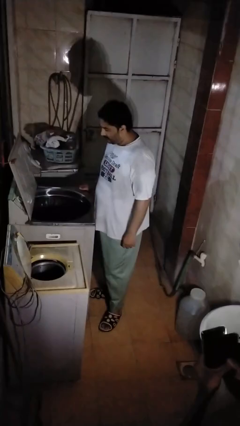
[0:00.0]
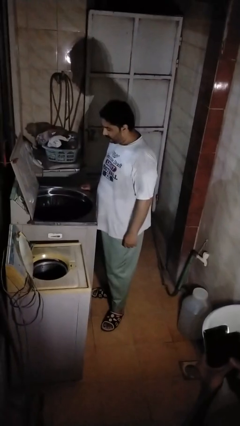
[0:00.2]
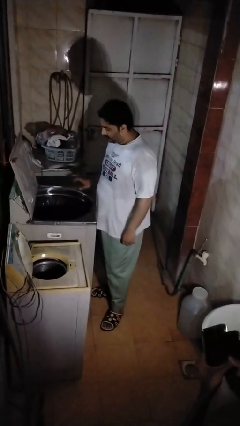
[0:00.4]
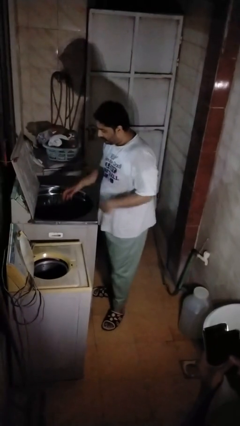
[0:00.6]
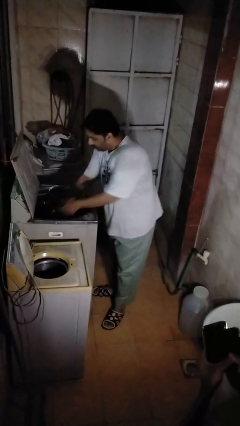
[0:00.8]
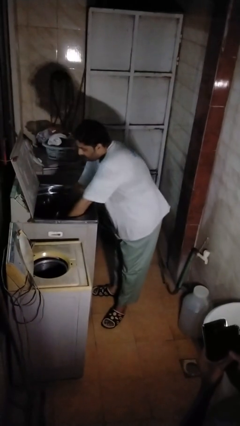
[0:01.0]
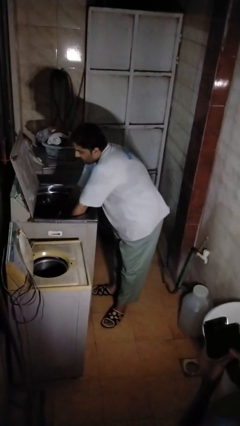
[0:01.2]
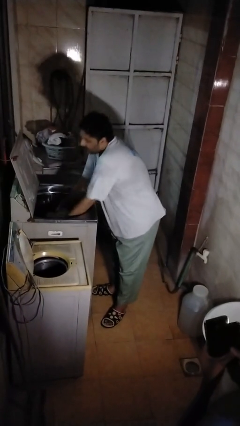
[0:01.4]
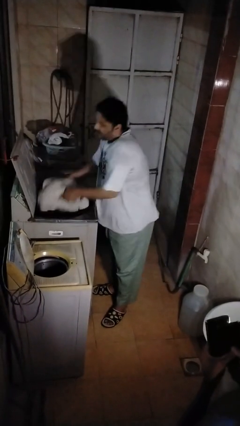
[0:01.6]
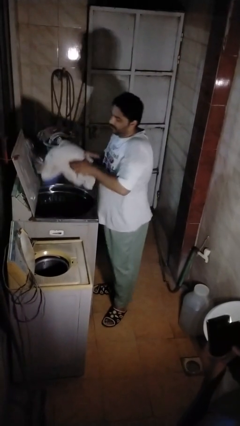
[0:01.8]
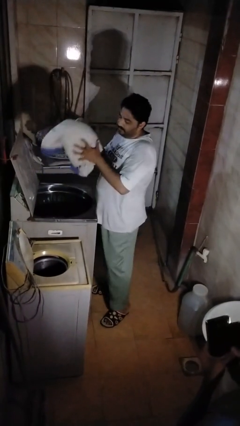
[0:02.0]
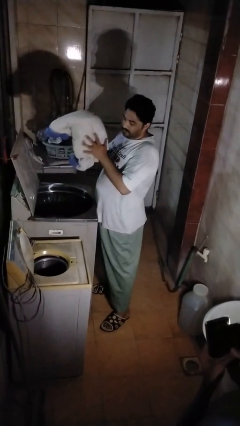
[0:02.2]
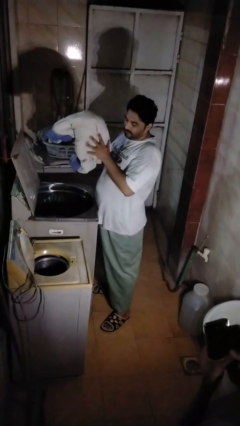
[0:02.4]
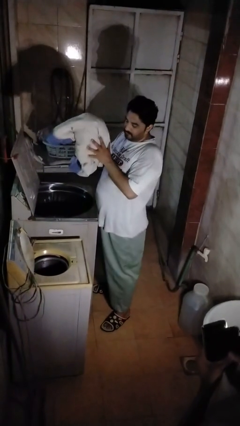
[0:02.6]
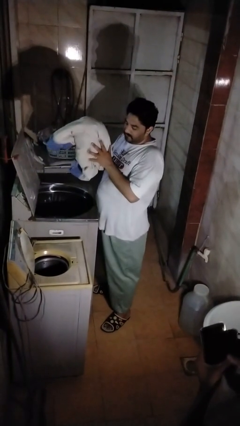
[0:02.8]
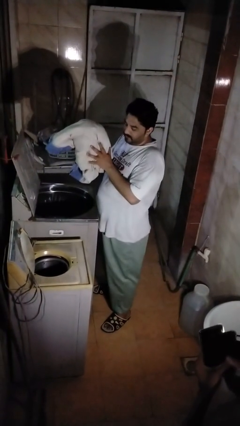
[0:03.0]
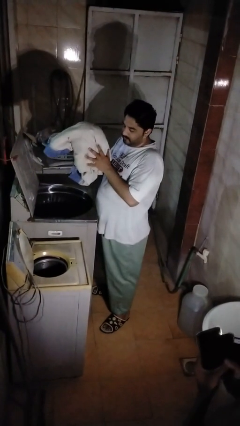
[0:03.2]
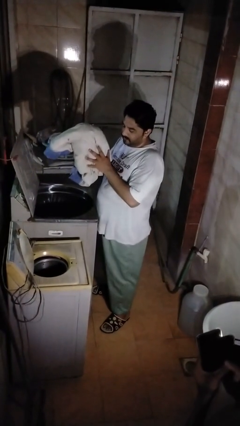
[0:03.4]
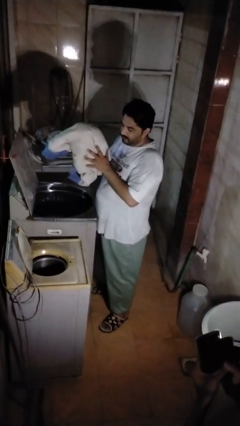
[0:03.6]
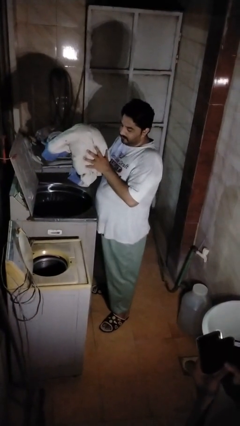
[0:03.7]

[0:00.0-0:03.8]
person unloads clotheswasher

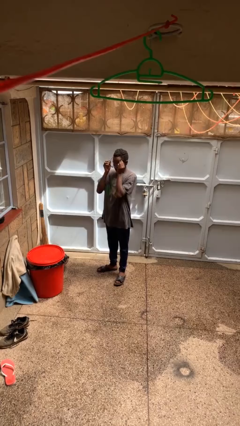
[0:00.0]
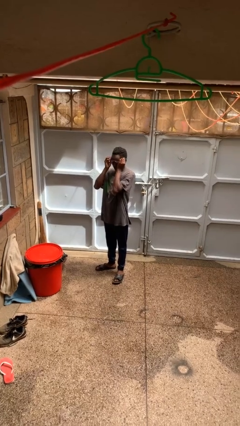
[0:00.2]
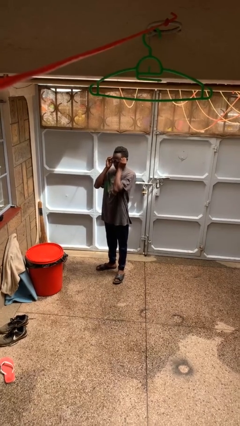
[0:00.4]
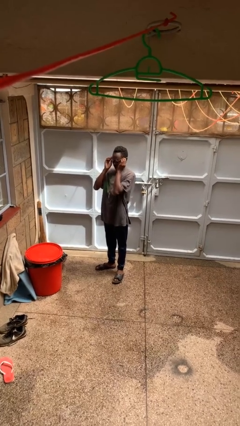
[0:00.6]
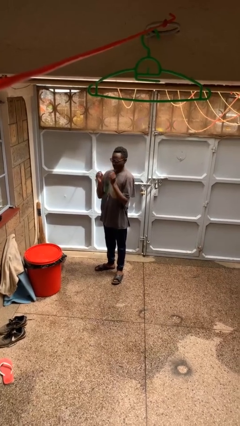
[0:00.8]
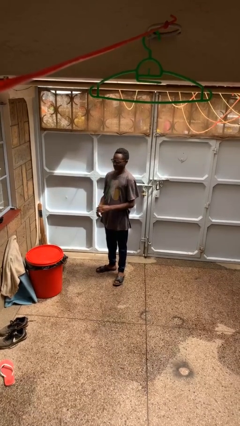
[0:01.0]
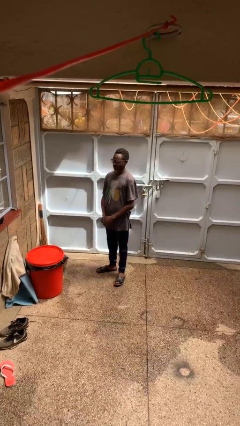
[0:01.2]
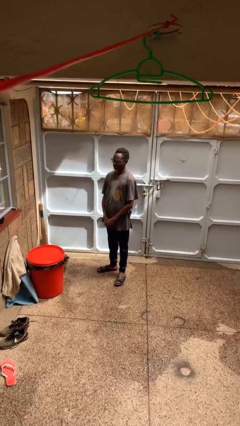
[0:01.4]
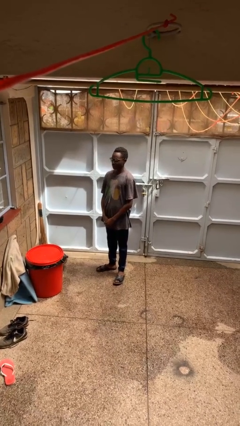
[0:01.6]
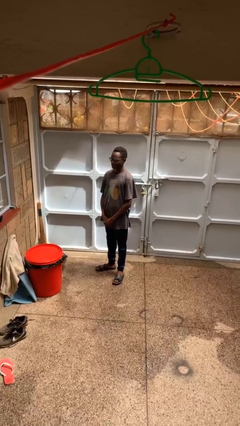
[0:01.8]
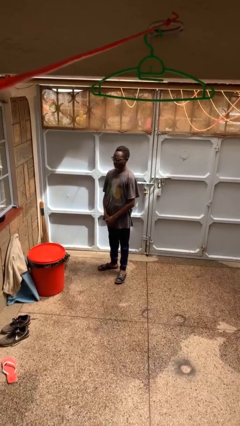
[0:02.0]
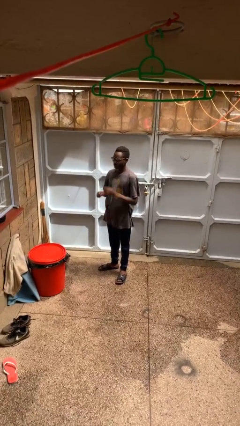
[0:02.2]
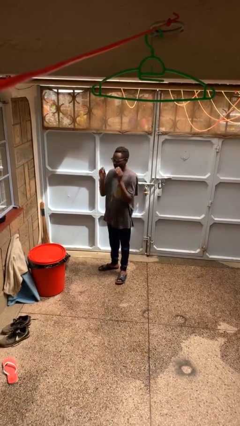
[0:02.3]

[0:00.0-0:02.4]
person puts on glasses

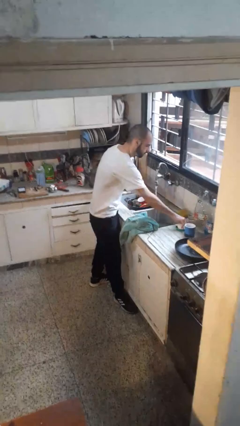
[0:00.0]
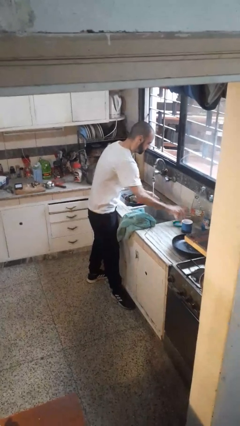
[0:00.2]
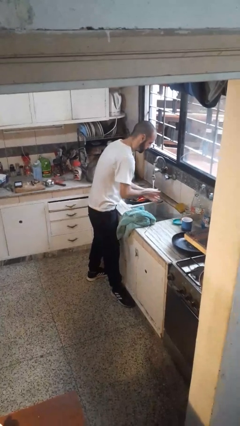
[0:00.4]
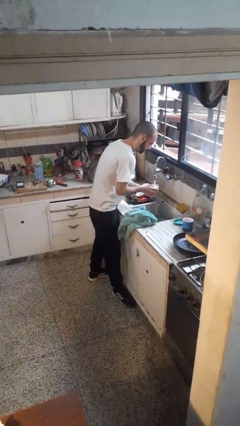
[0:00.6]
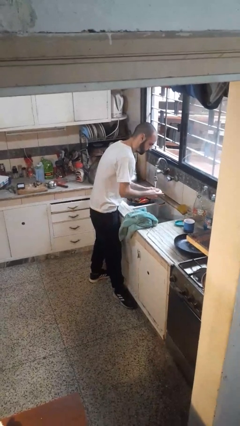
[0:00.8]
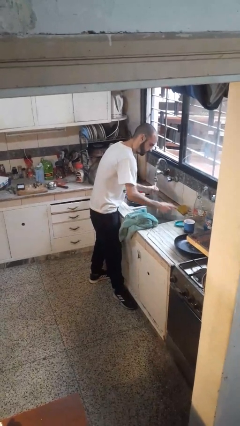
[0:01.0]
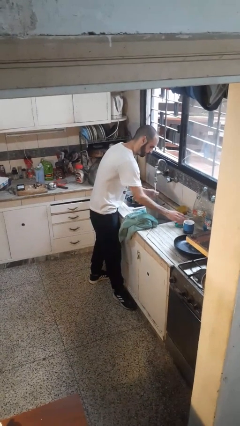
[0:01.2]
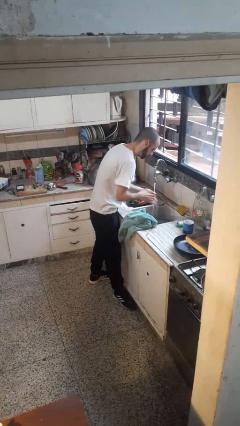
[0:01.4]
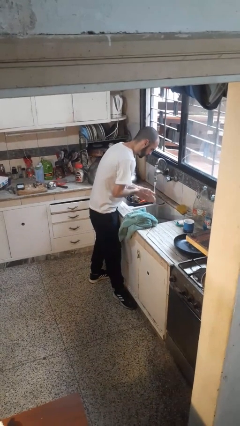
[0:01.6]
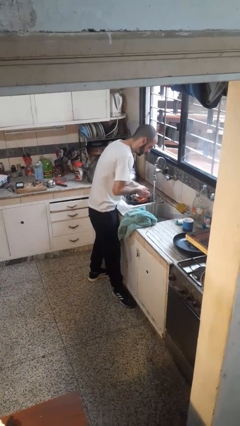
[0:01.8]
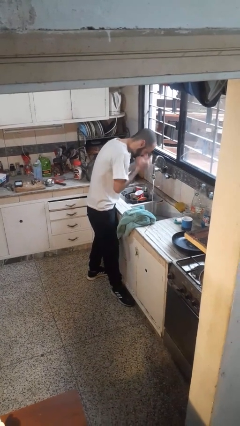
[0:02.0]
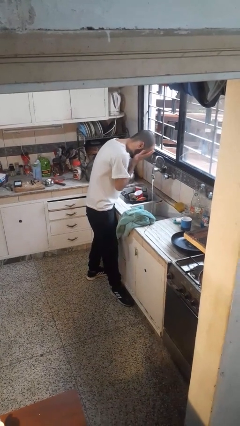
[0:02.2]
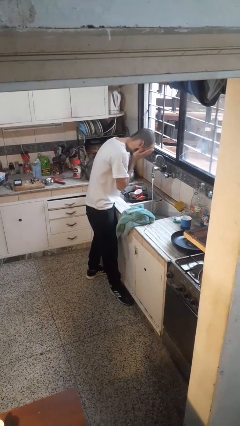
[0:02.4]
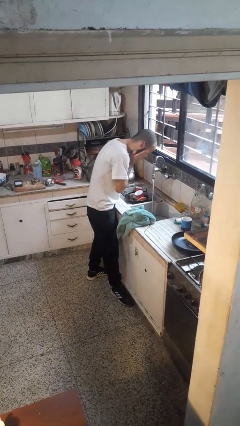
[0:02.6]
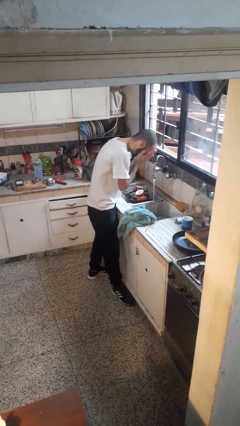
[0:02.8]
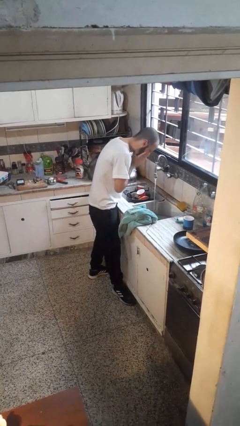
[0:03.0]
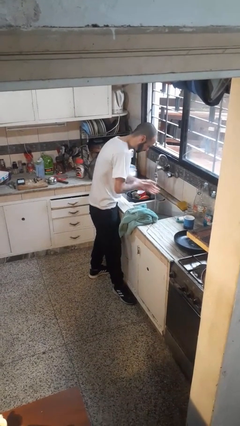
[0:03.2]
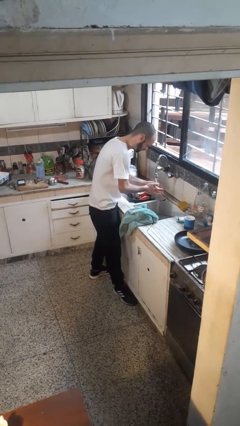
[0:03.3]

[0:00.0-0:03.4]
person washes face

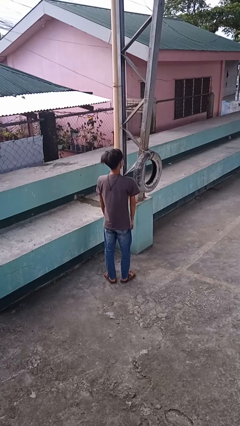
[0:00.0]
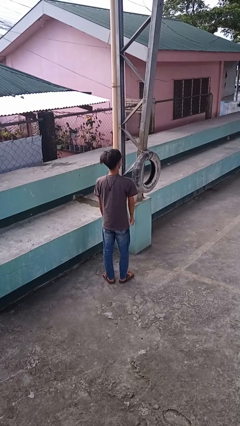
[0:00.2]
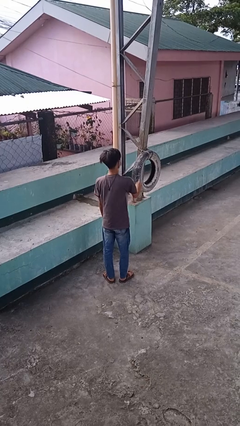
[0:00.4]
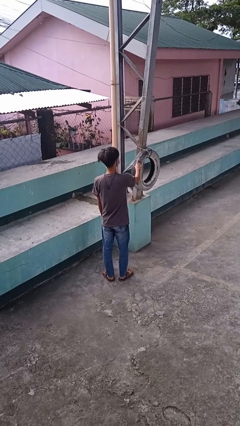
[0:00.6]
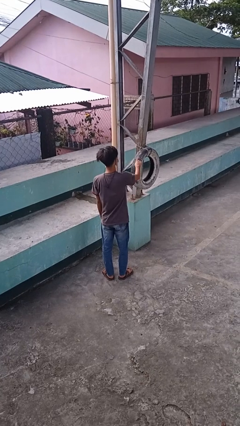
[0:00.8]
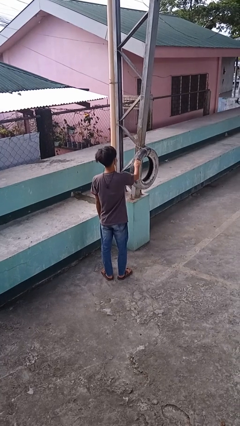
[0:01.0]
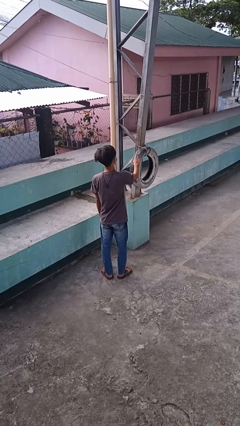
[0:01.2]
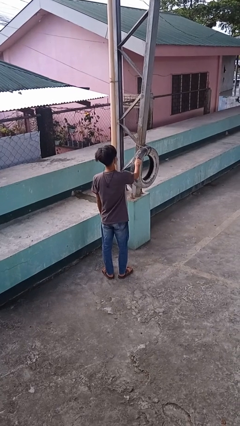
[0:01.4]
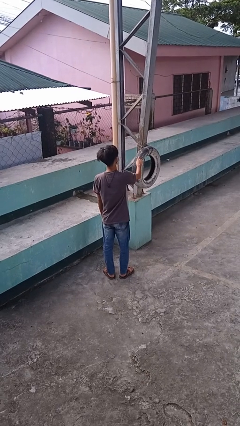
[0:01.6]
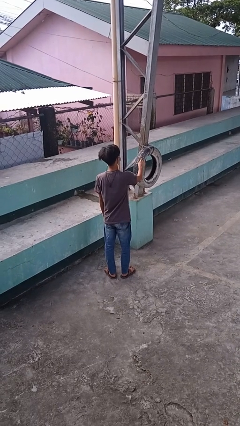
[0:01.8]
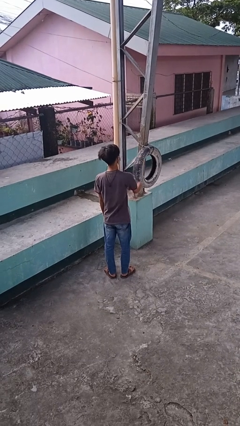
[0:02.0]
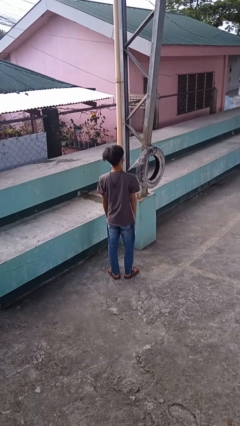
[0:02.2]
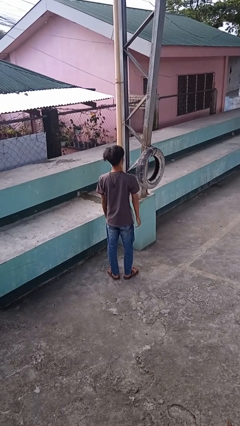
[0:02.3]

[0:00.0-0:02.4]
person taps object with finger

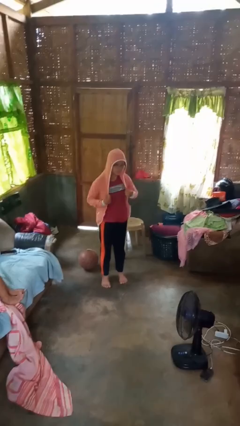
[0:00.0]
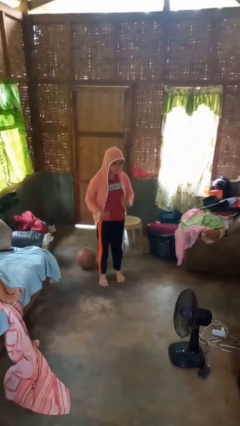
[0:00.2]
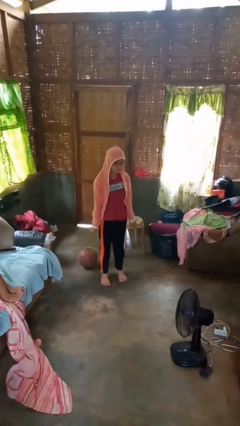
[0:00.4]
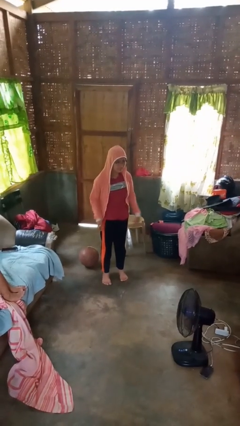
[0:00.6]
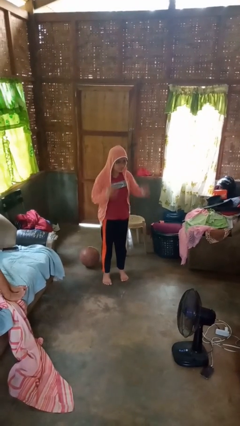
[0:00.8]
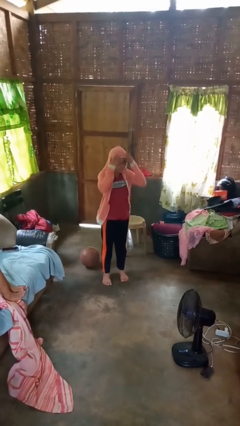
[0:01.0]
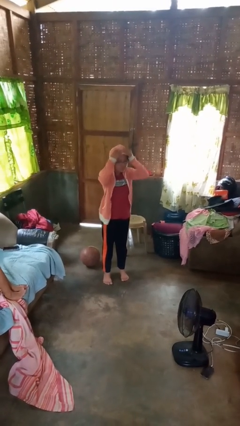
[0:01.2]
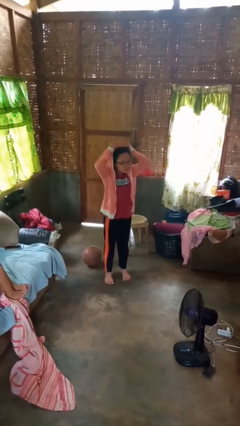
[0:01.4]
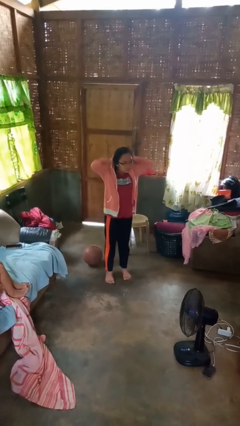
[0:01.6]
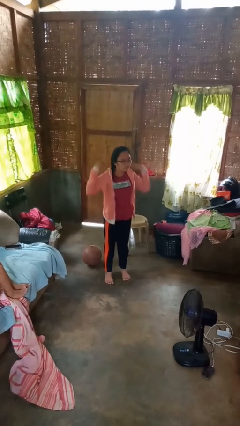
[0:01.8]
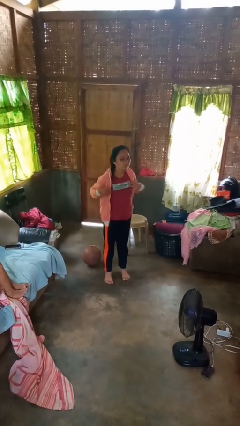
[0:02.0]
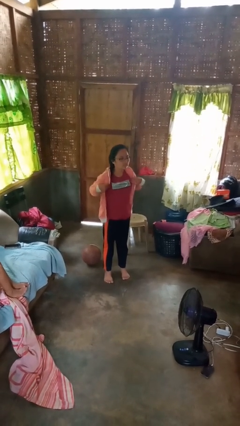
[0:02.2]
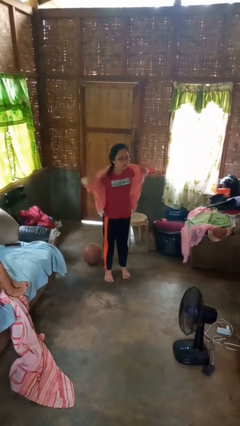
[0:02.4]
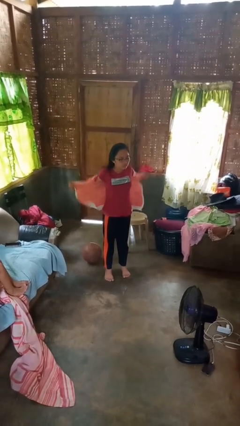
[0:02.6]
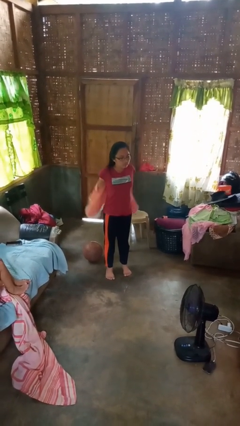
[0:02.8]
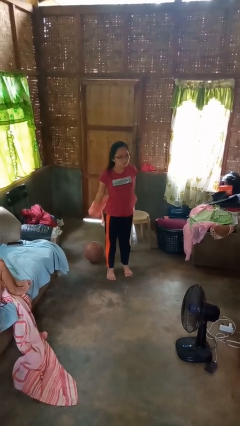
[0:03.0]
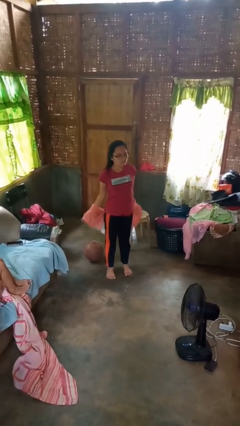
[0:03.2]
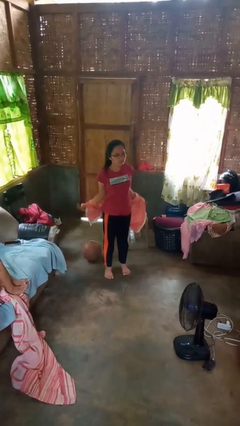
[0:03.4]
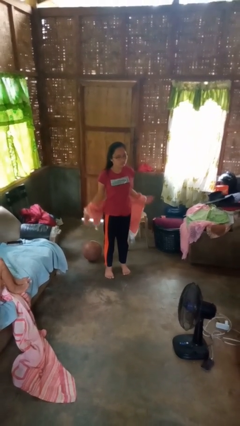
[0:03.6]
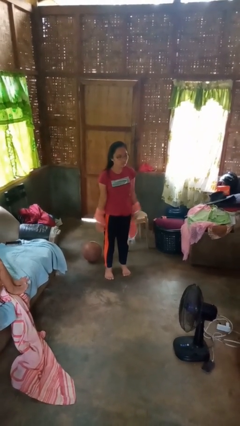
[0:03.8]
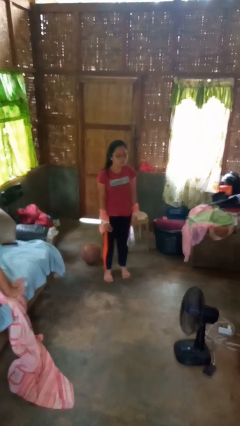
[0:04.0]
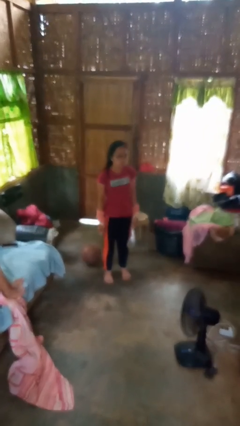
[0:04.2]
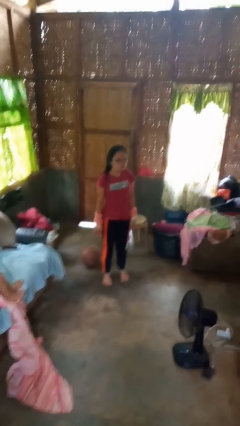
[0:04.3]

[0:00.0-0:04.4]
person takes off hoodie

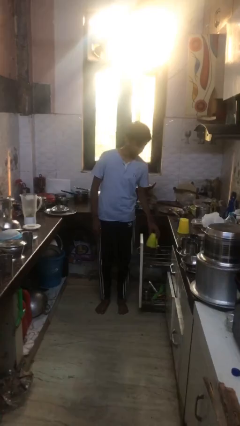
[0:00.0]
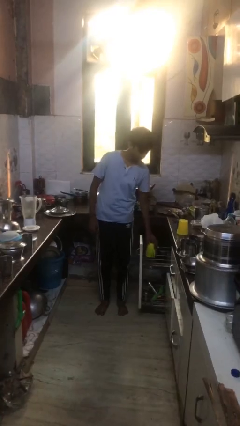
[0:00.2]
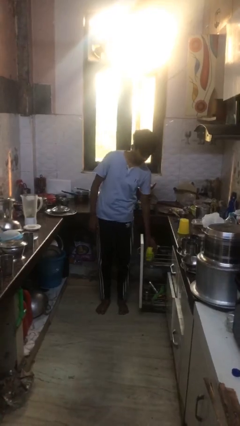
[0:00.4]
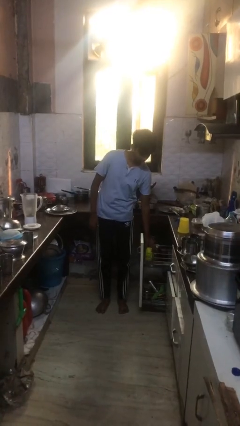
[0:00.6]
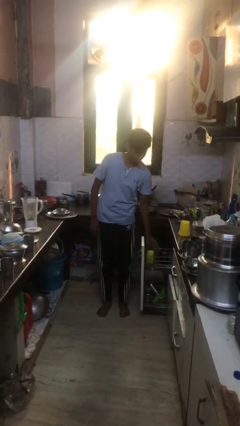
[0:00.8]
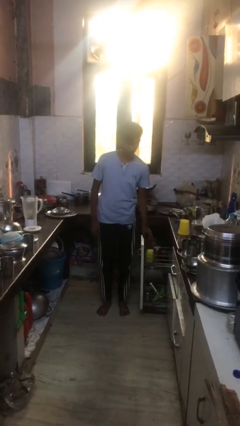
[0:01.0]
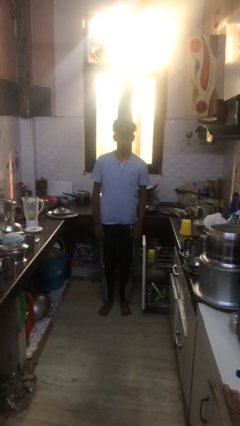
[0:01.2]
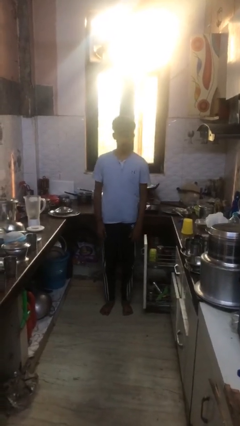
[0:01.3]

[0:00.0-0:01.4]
person loads dishwasher
